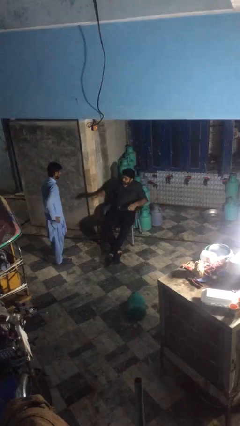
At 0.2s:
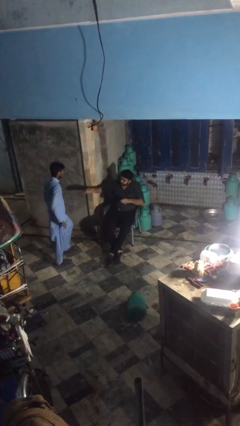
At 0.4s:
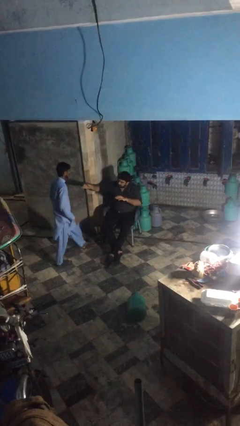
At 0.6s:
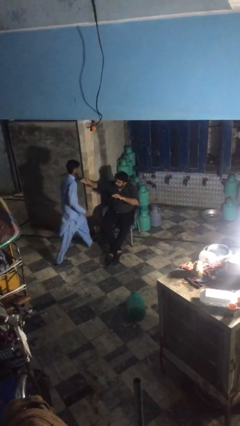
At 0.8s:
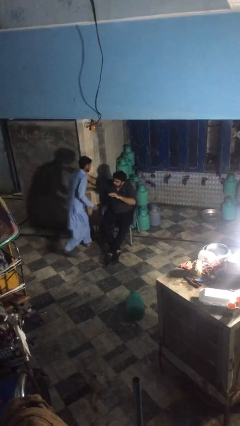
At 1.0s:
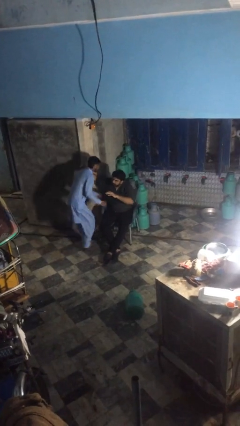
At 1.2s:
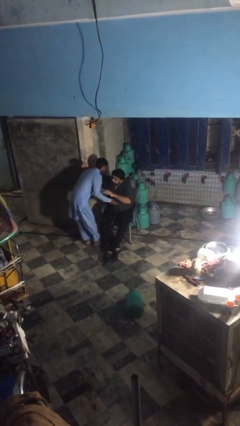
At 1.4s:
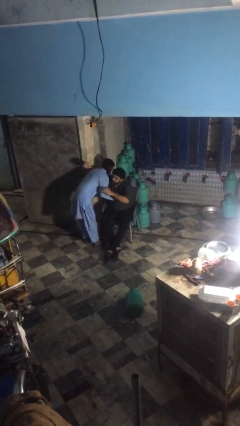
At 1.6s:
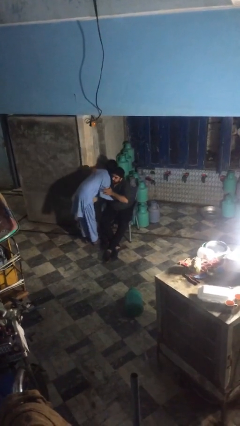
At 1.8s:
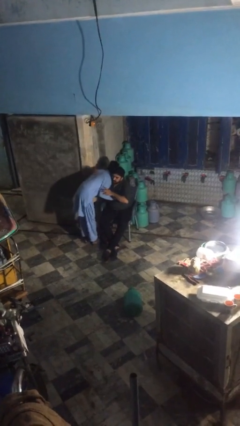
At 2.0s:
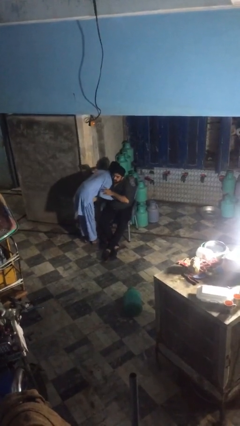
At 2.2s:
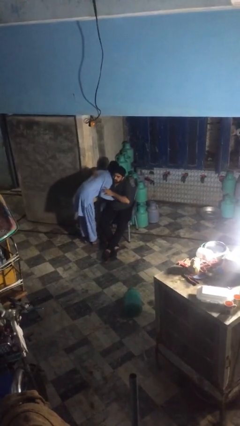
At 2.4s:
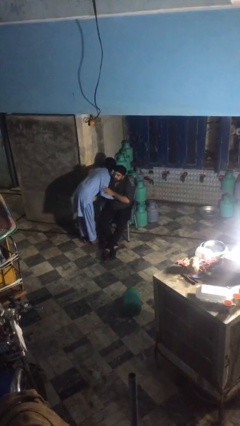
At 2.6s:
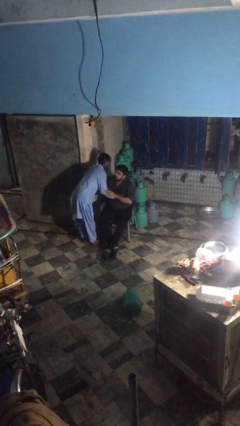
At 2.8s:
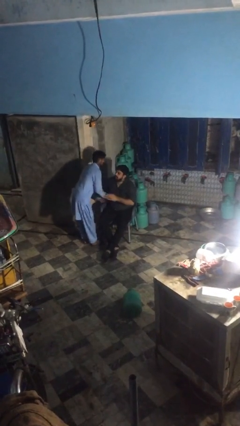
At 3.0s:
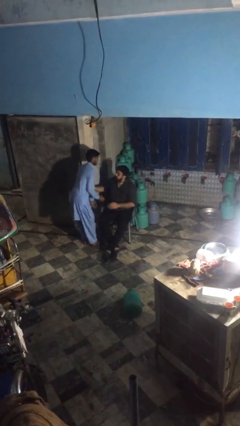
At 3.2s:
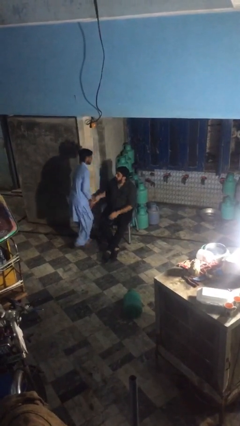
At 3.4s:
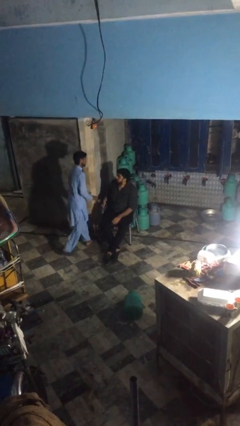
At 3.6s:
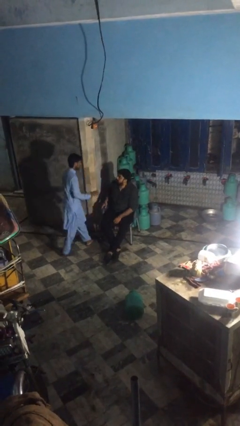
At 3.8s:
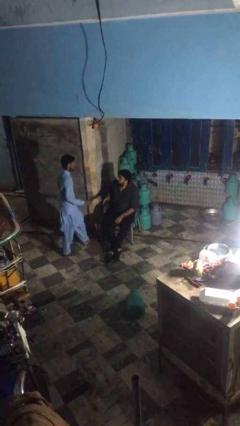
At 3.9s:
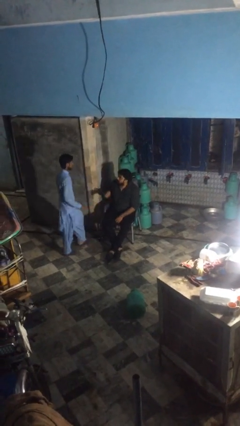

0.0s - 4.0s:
person embraces person

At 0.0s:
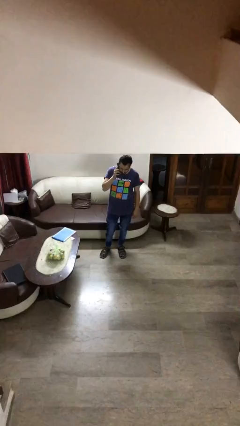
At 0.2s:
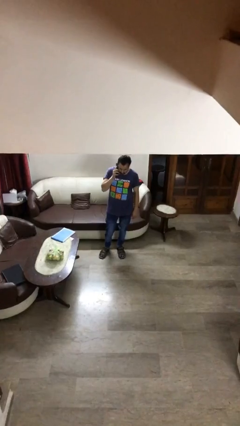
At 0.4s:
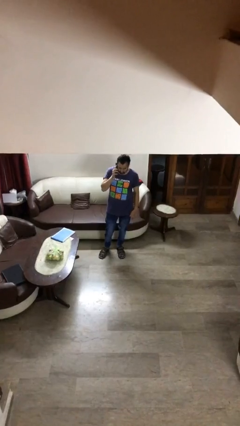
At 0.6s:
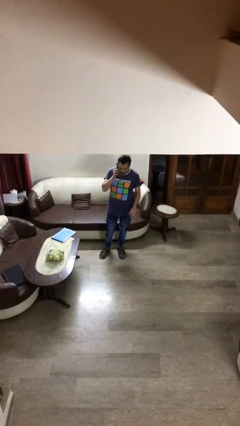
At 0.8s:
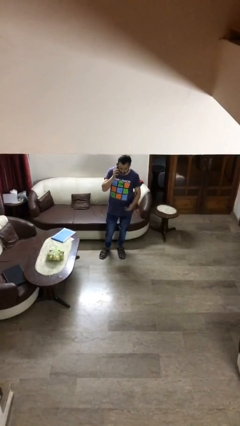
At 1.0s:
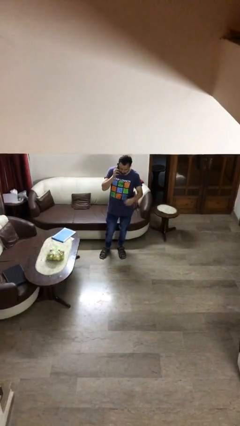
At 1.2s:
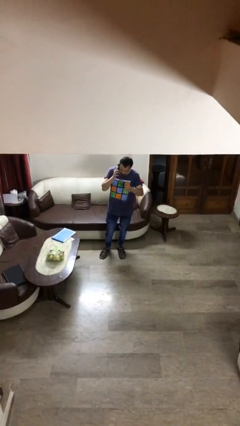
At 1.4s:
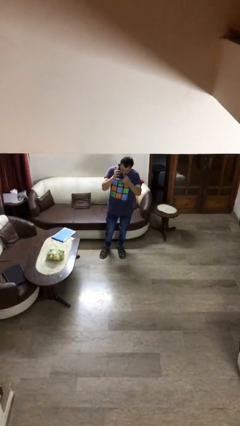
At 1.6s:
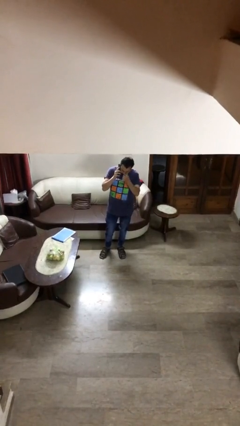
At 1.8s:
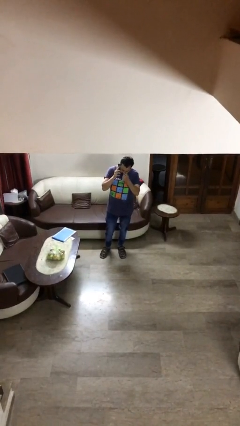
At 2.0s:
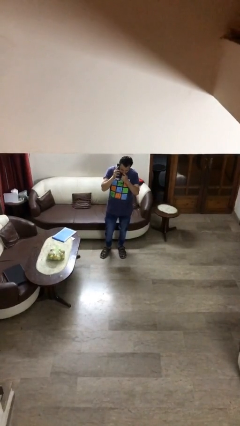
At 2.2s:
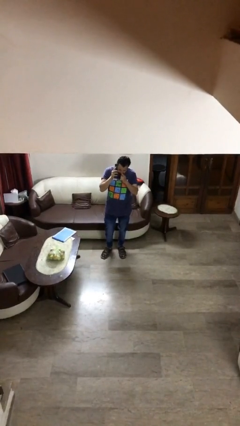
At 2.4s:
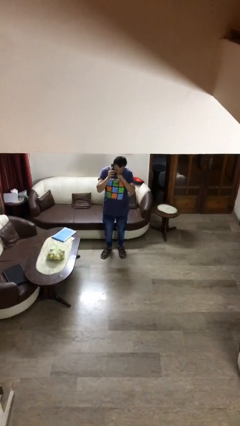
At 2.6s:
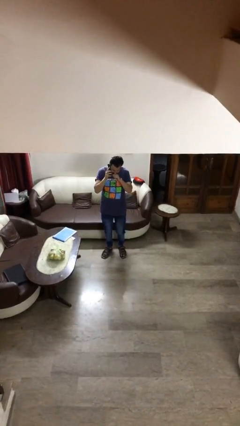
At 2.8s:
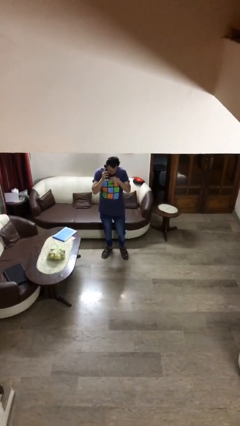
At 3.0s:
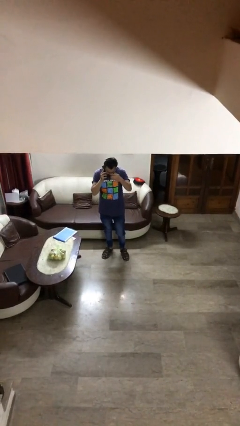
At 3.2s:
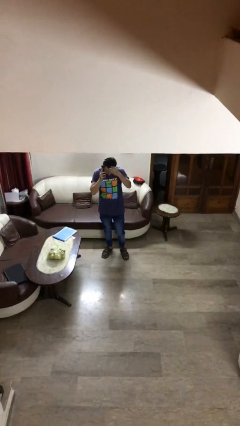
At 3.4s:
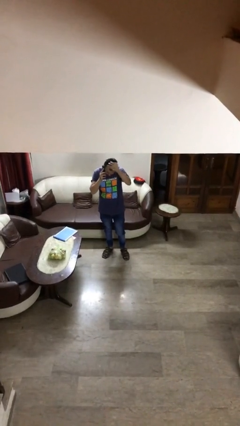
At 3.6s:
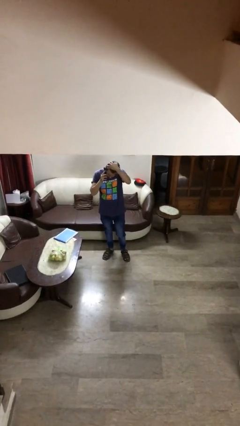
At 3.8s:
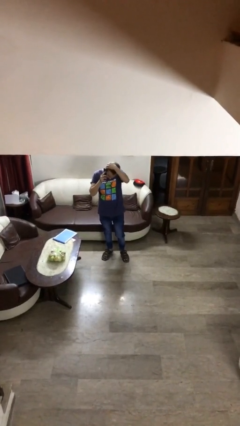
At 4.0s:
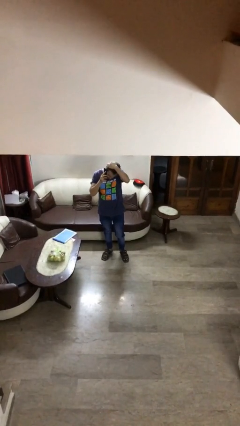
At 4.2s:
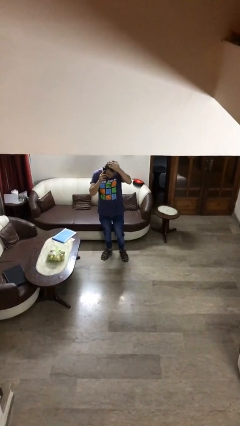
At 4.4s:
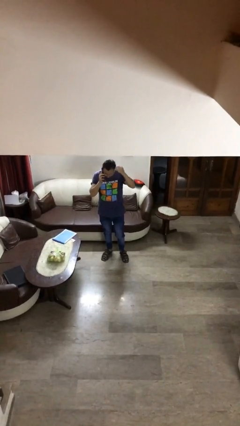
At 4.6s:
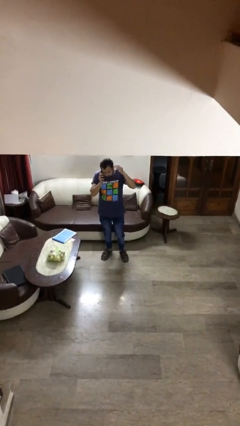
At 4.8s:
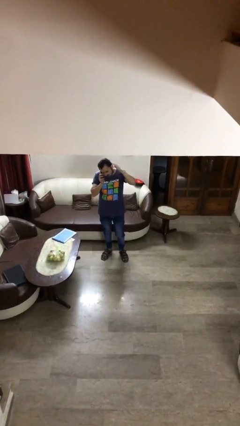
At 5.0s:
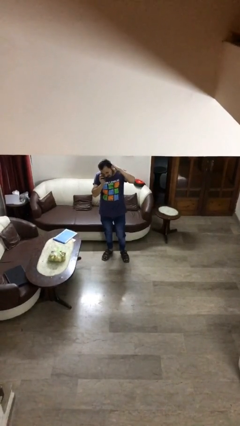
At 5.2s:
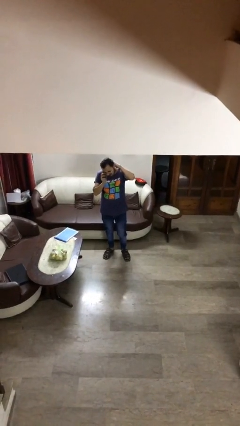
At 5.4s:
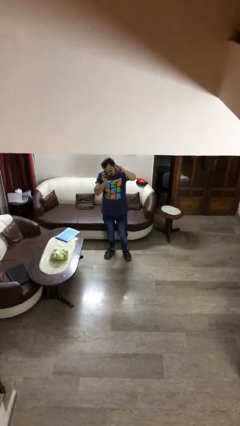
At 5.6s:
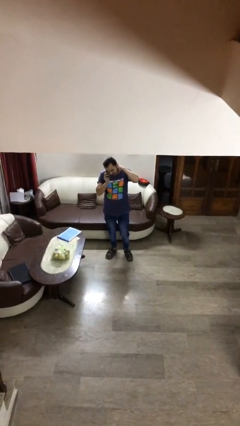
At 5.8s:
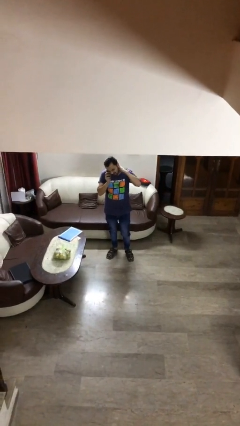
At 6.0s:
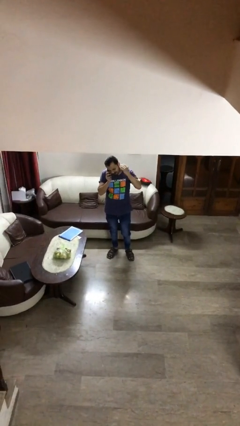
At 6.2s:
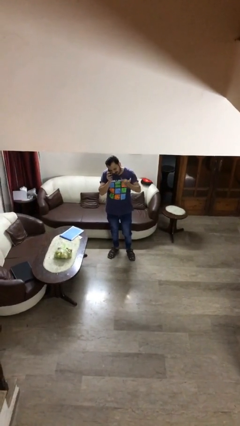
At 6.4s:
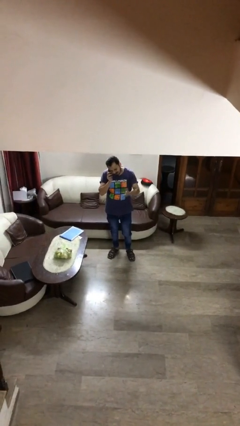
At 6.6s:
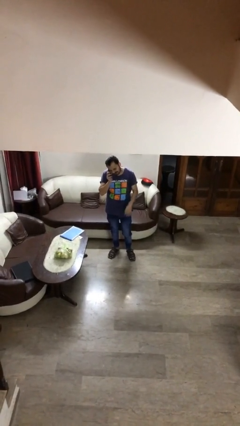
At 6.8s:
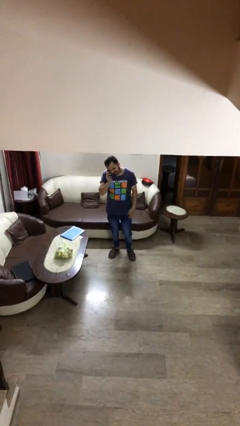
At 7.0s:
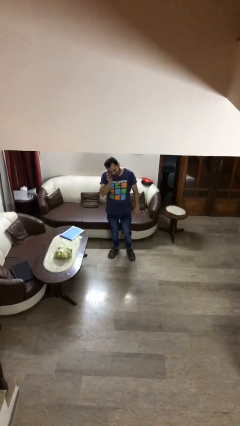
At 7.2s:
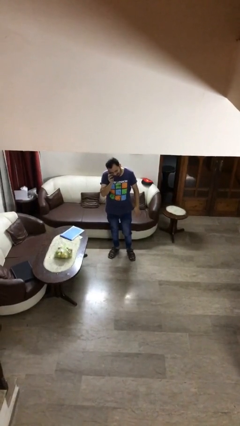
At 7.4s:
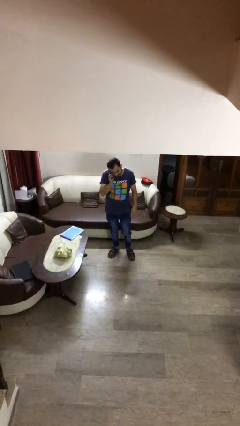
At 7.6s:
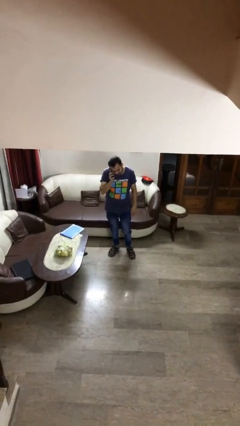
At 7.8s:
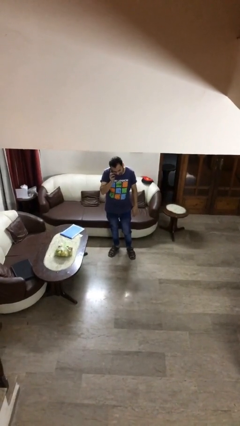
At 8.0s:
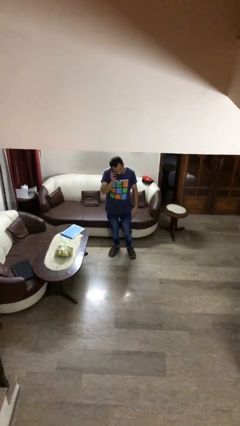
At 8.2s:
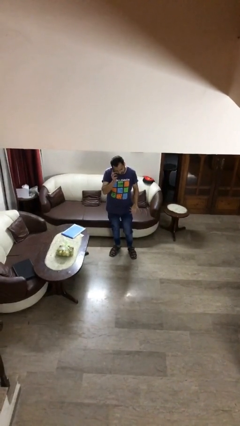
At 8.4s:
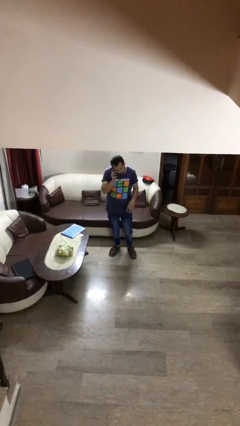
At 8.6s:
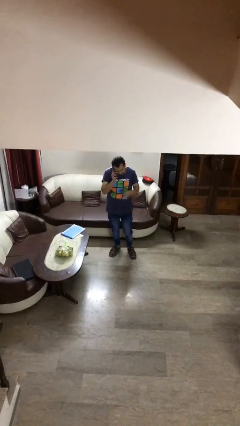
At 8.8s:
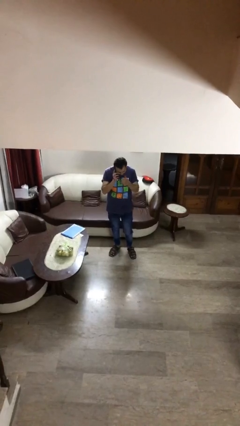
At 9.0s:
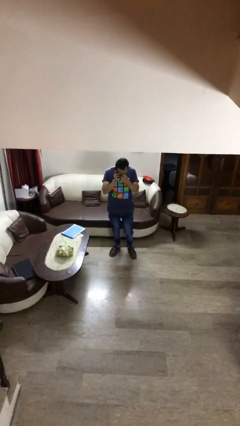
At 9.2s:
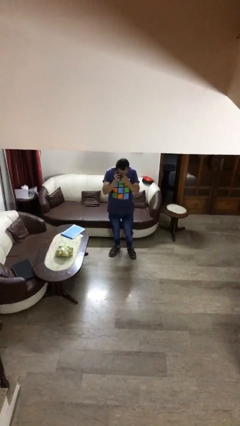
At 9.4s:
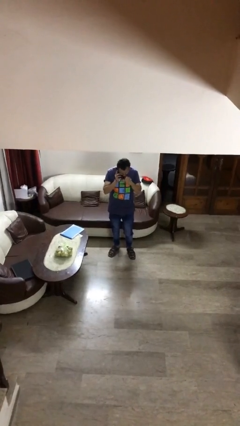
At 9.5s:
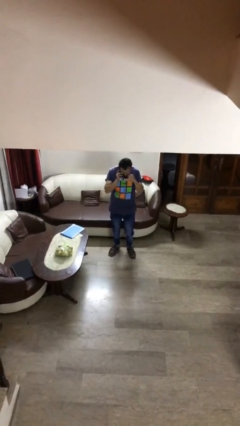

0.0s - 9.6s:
person talks on phone

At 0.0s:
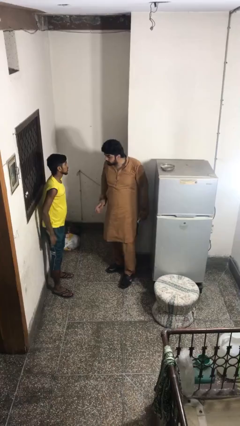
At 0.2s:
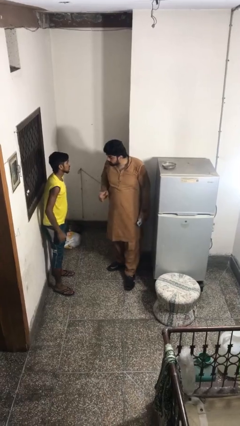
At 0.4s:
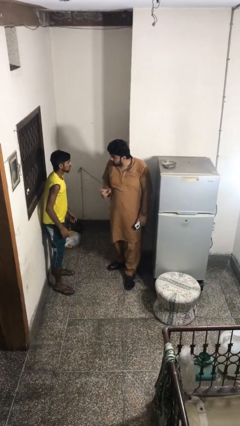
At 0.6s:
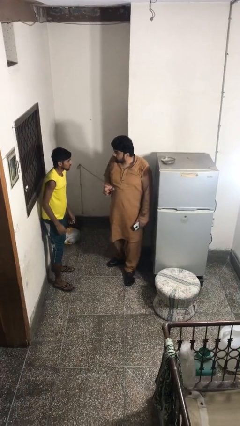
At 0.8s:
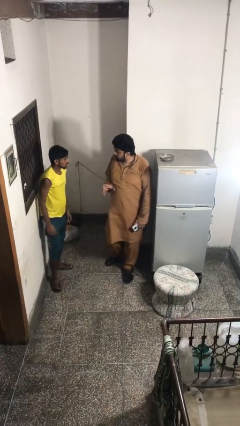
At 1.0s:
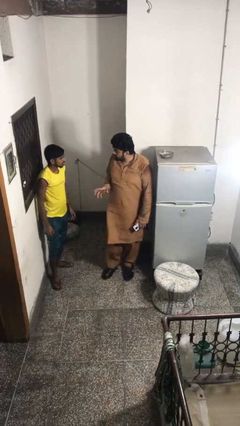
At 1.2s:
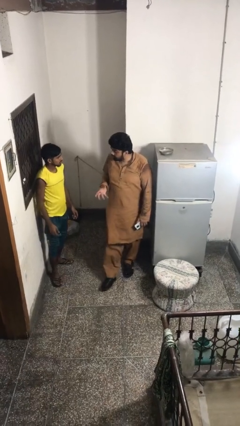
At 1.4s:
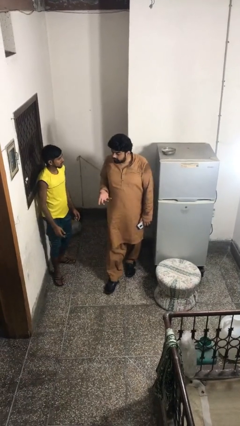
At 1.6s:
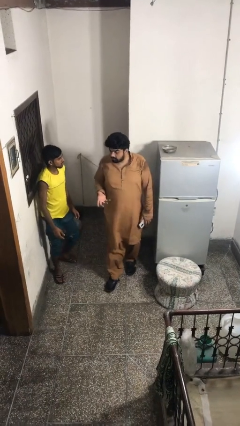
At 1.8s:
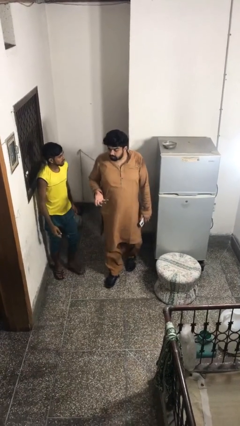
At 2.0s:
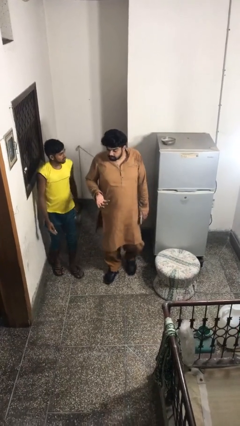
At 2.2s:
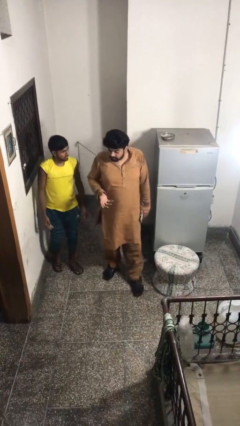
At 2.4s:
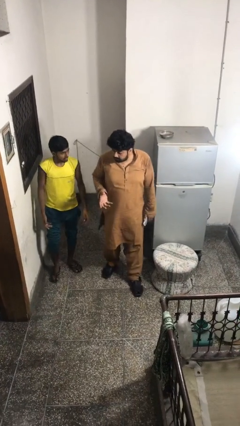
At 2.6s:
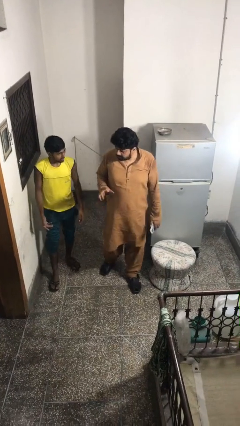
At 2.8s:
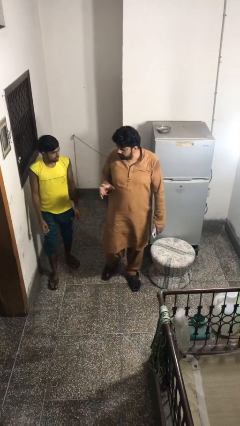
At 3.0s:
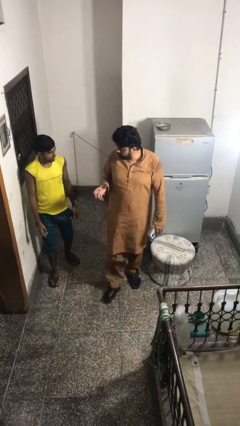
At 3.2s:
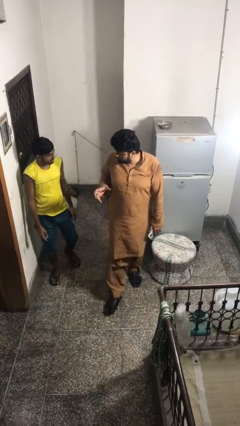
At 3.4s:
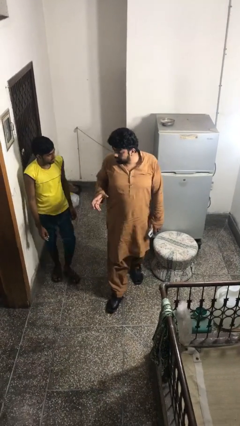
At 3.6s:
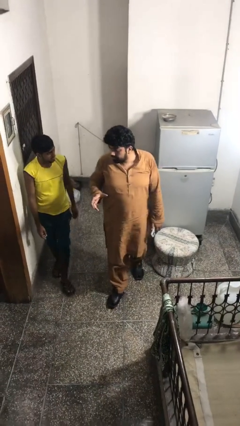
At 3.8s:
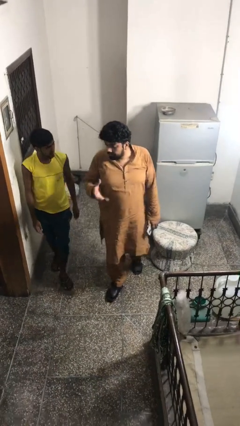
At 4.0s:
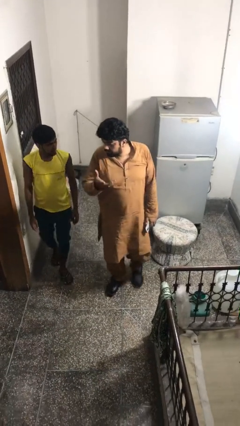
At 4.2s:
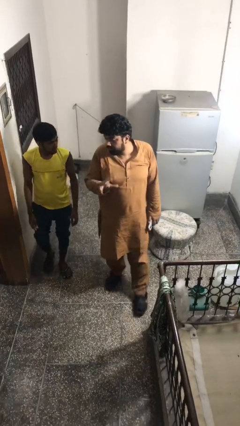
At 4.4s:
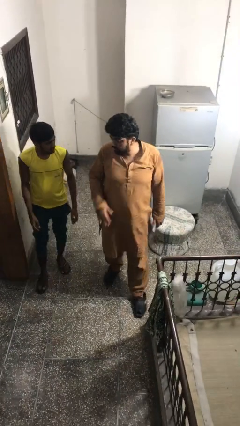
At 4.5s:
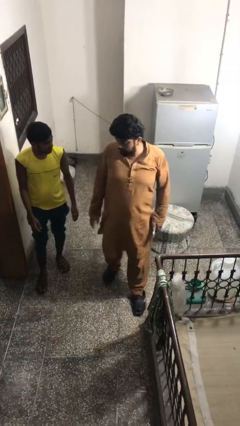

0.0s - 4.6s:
person talks to person
